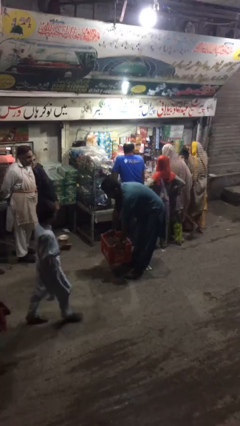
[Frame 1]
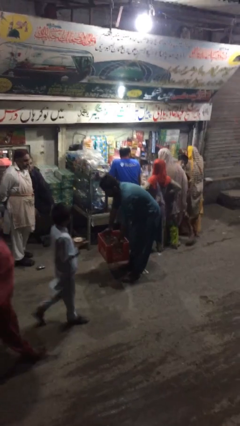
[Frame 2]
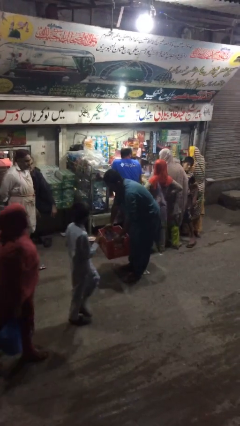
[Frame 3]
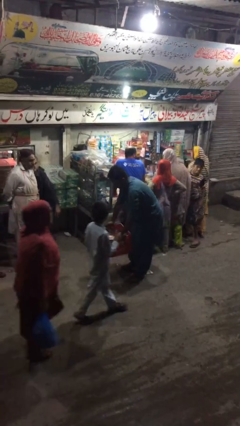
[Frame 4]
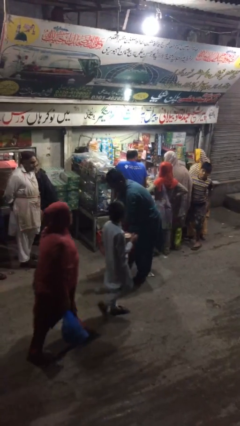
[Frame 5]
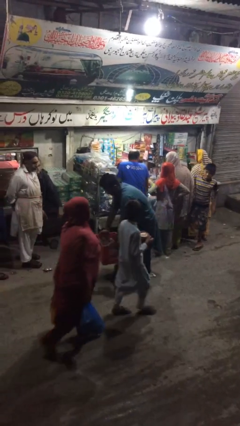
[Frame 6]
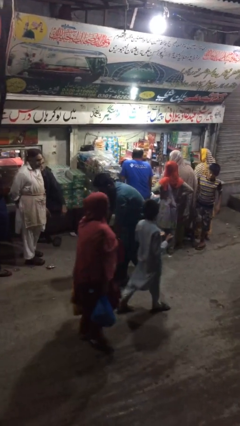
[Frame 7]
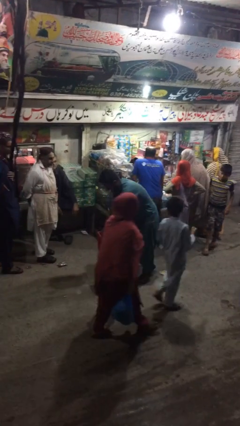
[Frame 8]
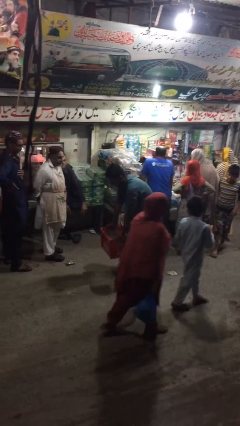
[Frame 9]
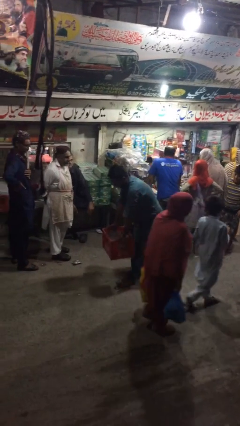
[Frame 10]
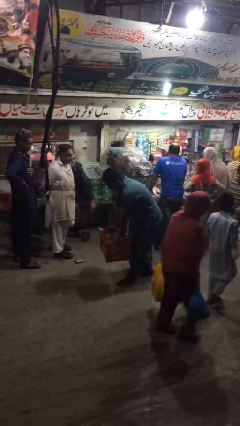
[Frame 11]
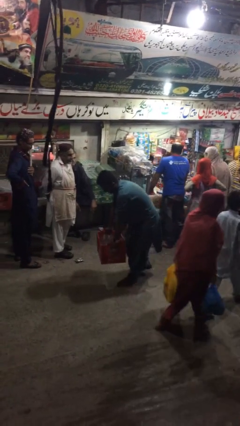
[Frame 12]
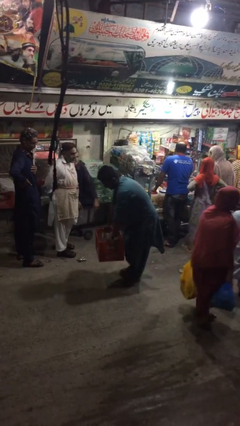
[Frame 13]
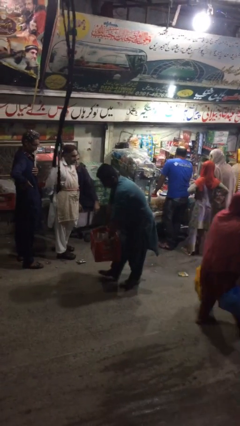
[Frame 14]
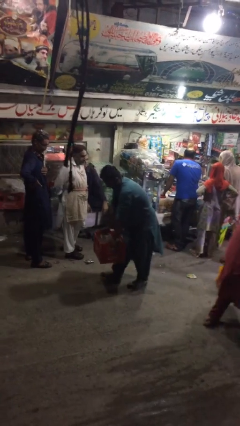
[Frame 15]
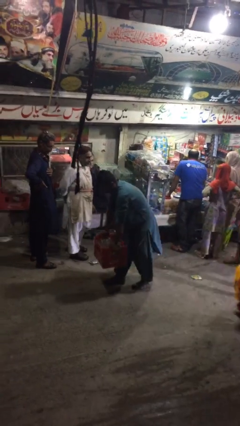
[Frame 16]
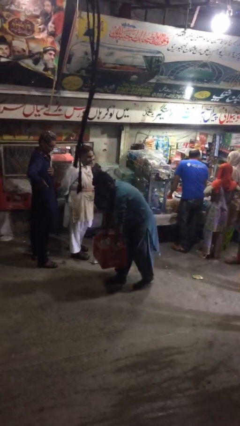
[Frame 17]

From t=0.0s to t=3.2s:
person carries heavy object

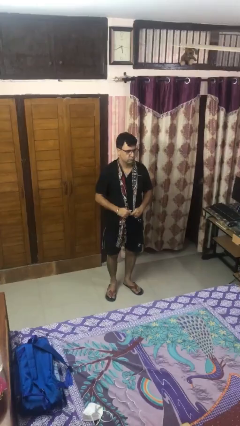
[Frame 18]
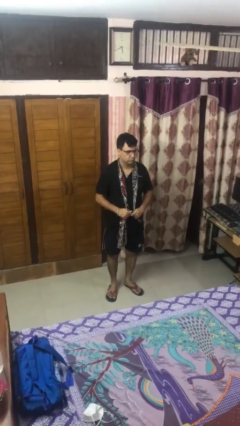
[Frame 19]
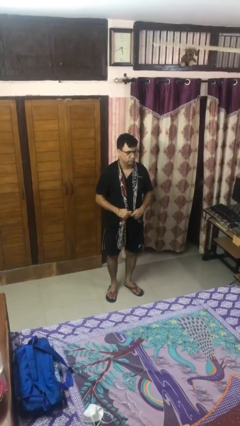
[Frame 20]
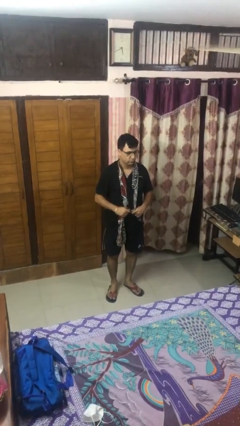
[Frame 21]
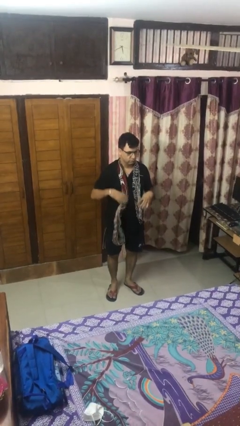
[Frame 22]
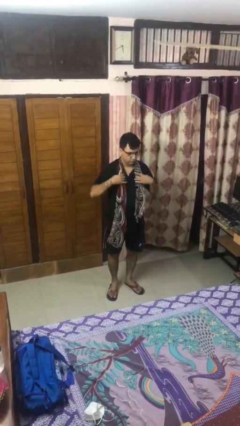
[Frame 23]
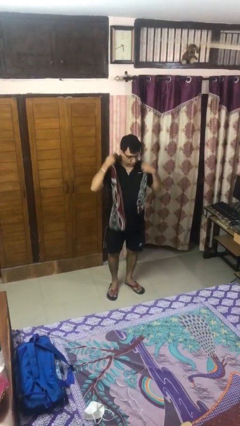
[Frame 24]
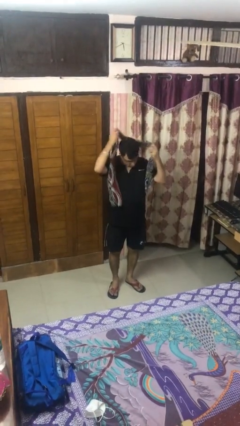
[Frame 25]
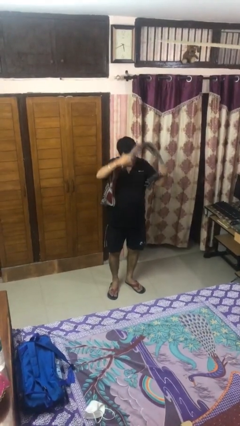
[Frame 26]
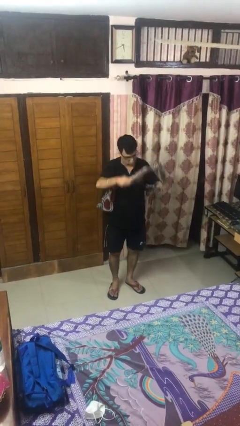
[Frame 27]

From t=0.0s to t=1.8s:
person takes off scarf

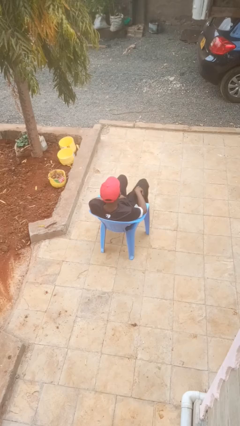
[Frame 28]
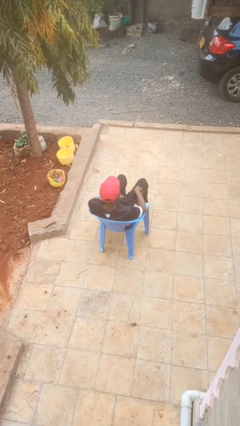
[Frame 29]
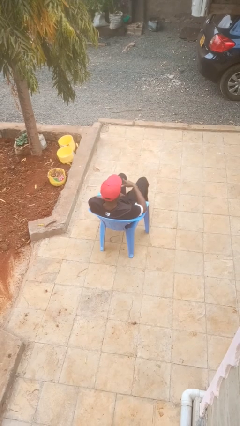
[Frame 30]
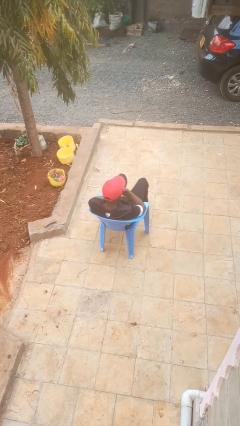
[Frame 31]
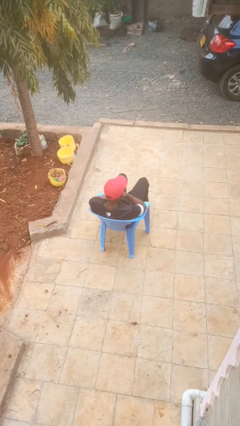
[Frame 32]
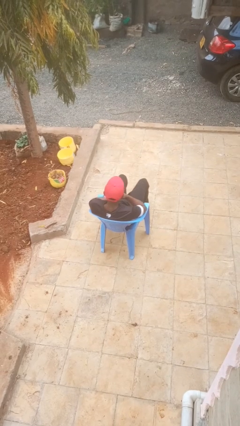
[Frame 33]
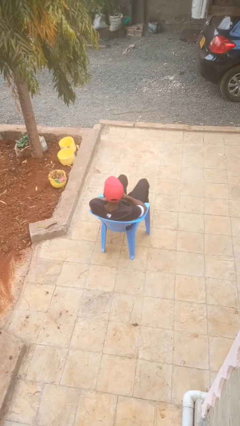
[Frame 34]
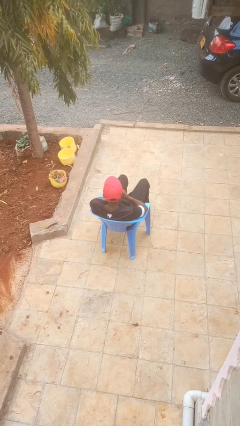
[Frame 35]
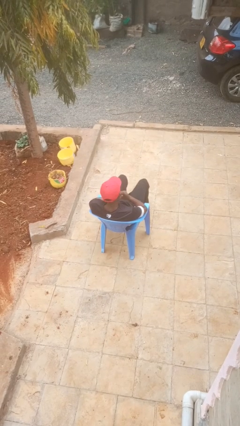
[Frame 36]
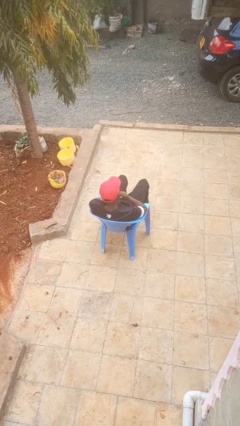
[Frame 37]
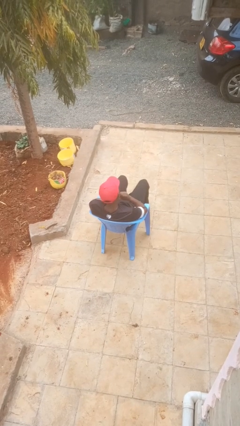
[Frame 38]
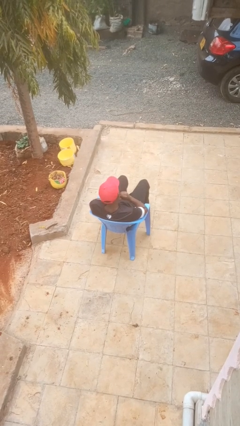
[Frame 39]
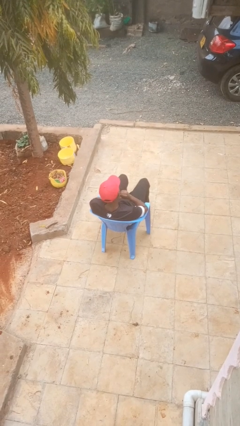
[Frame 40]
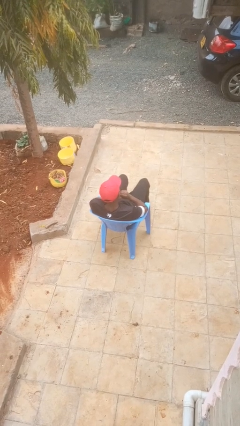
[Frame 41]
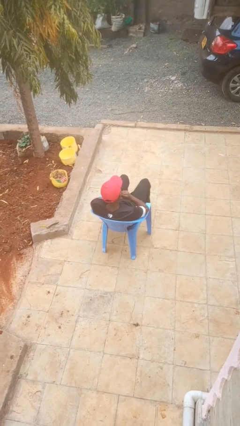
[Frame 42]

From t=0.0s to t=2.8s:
person strokes chin

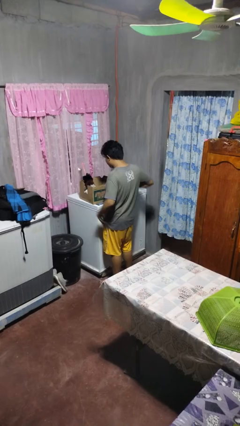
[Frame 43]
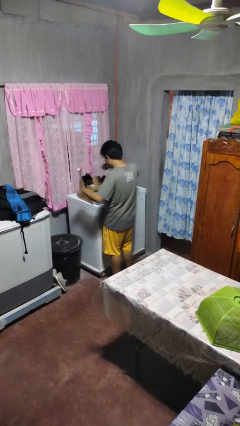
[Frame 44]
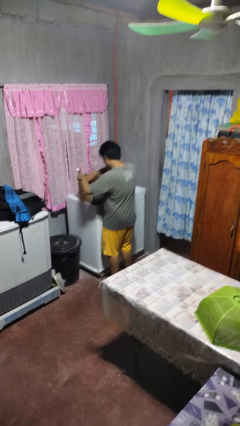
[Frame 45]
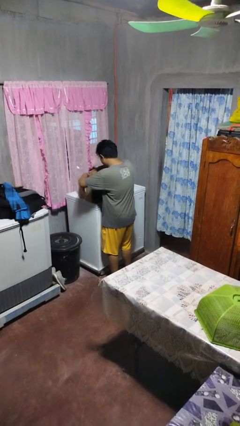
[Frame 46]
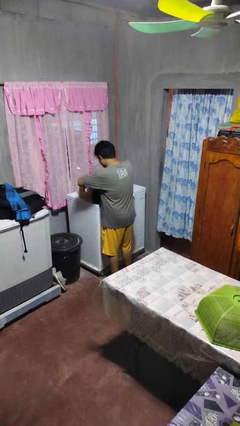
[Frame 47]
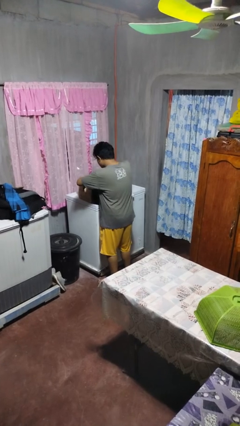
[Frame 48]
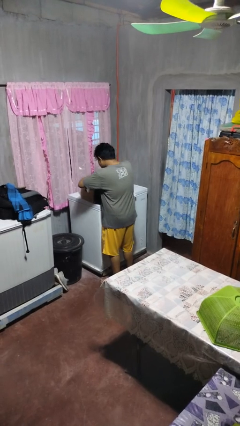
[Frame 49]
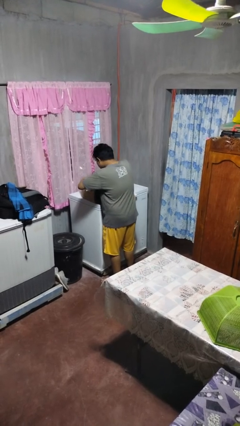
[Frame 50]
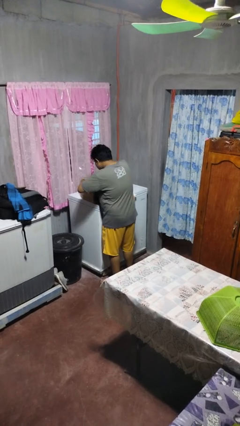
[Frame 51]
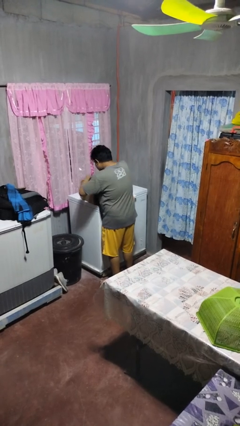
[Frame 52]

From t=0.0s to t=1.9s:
person searches in box

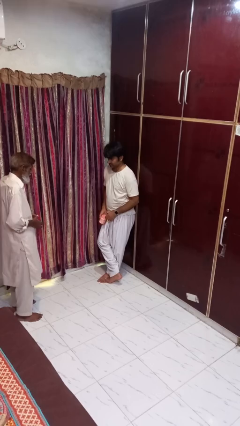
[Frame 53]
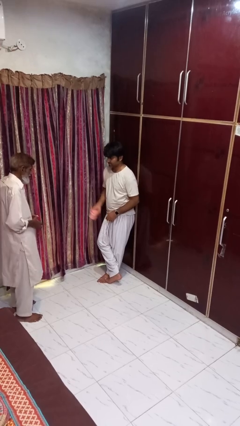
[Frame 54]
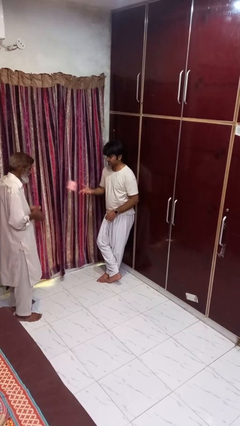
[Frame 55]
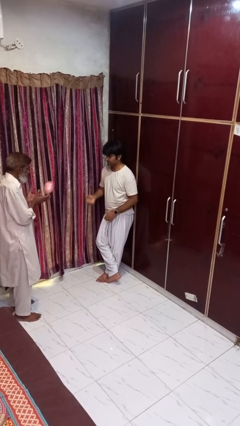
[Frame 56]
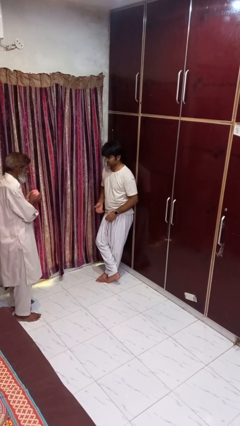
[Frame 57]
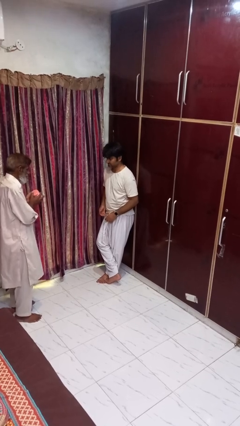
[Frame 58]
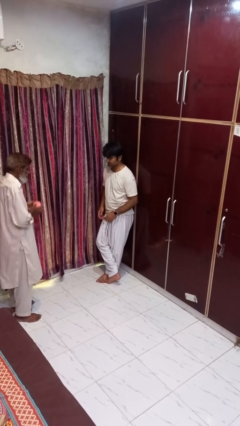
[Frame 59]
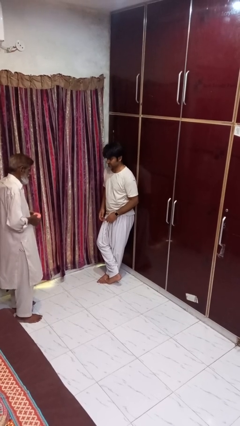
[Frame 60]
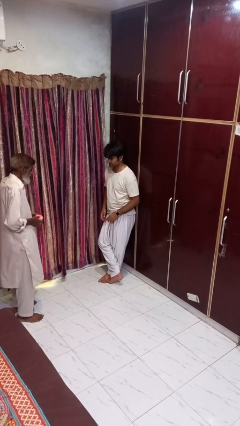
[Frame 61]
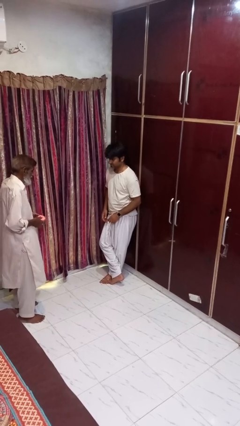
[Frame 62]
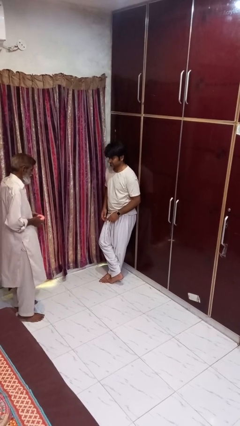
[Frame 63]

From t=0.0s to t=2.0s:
person throws object to person

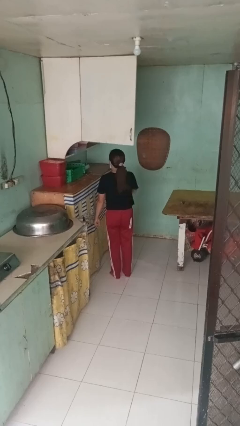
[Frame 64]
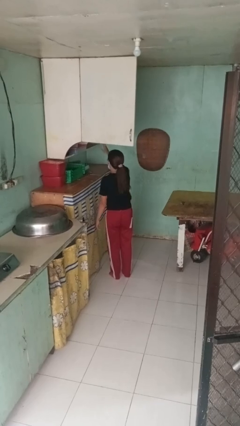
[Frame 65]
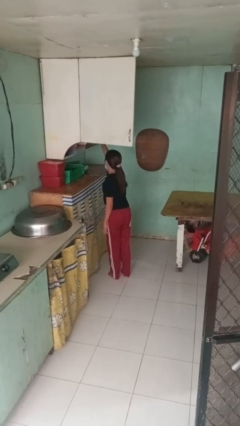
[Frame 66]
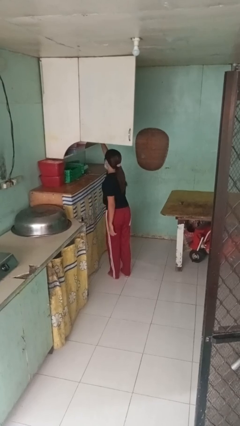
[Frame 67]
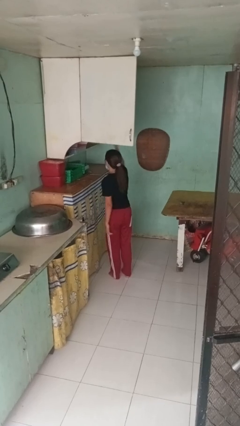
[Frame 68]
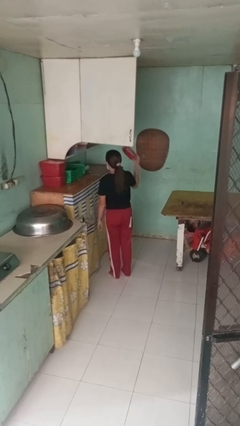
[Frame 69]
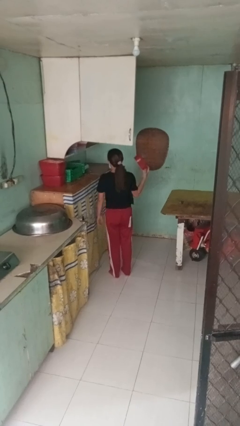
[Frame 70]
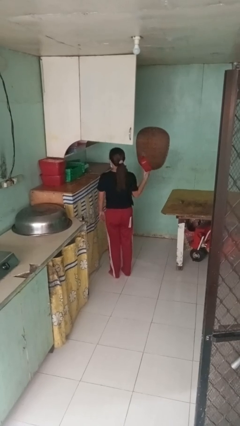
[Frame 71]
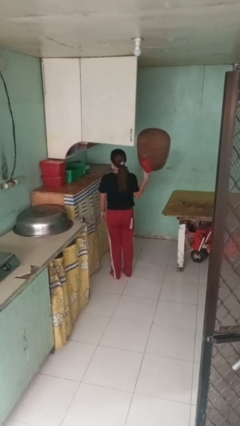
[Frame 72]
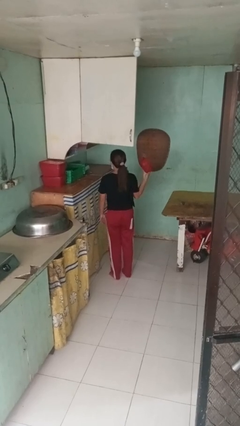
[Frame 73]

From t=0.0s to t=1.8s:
person takes object from cabinet

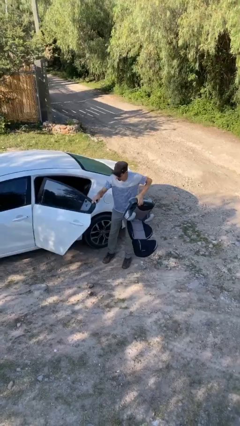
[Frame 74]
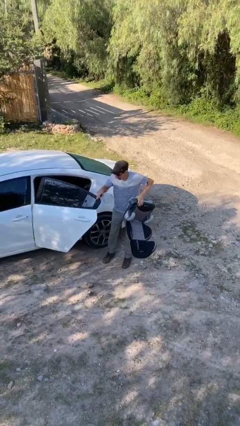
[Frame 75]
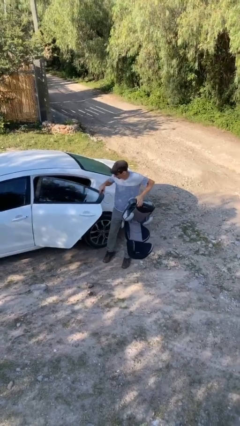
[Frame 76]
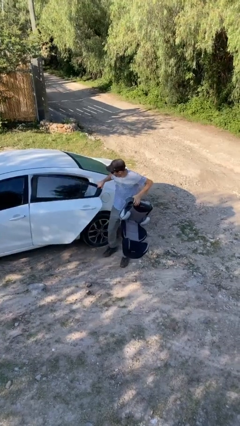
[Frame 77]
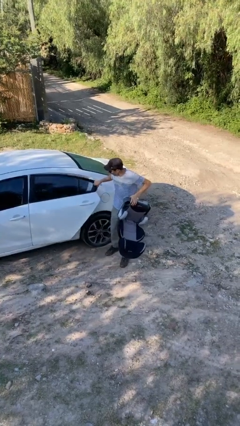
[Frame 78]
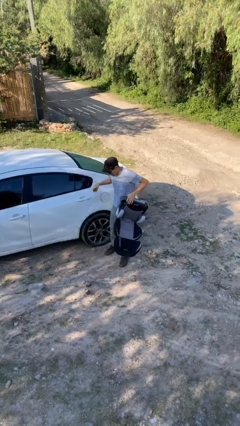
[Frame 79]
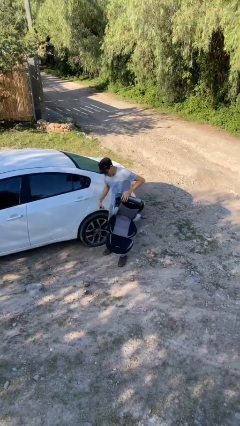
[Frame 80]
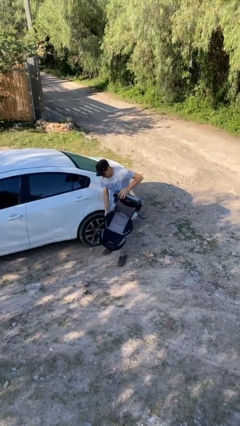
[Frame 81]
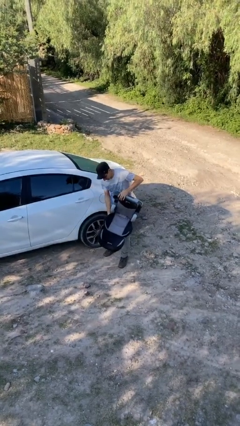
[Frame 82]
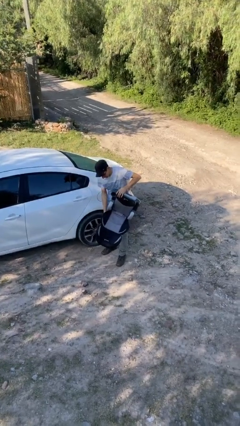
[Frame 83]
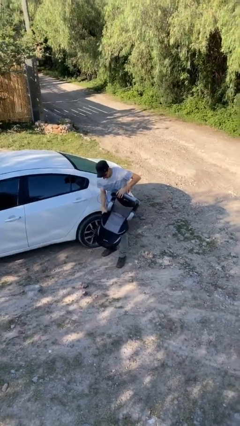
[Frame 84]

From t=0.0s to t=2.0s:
person closes car door

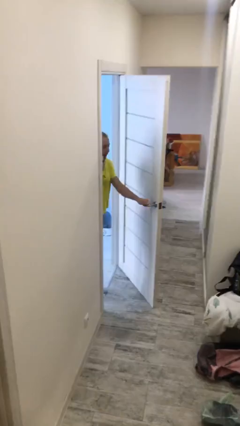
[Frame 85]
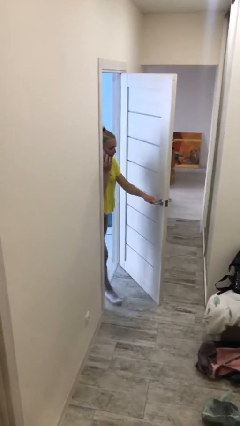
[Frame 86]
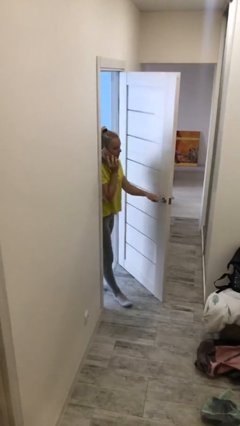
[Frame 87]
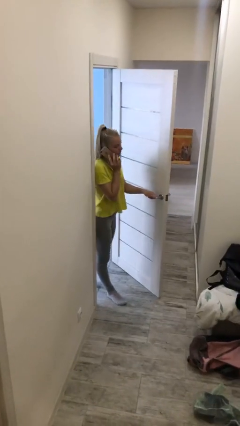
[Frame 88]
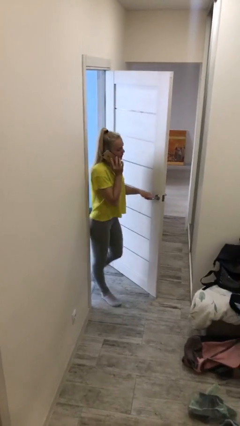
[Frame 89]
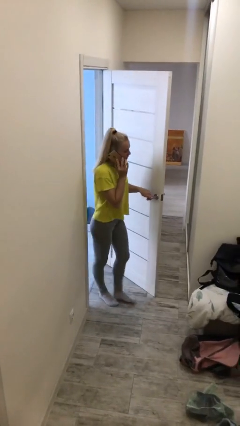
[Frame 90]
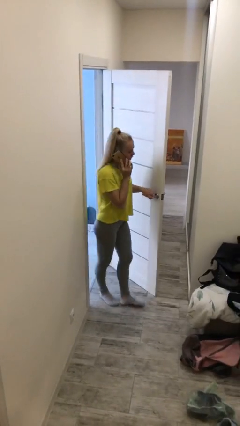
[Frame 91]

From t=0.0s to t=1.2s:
person enters scene through structure

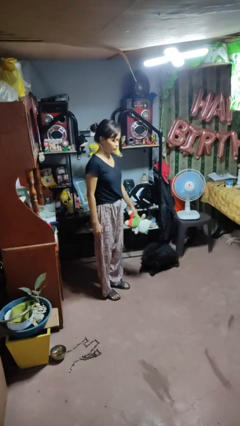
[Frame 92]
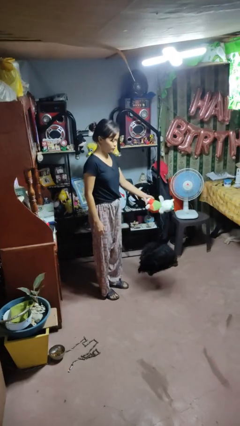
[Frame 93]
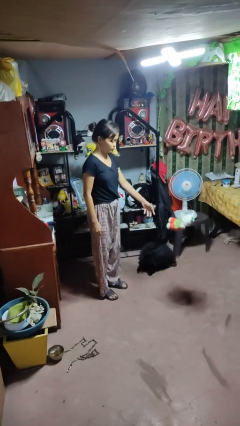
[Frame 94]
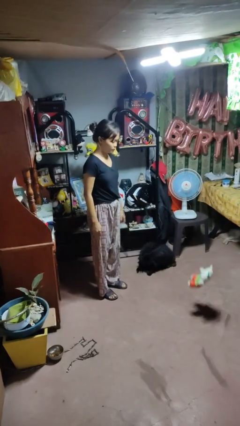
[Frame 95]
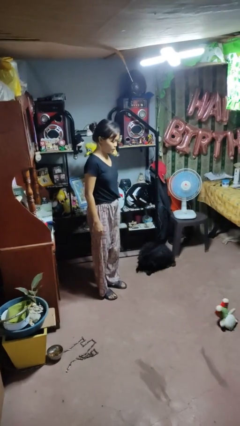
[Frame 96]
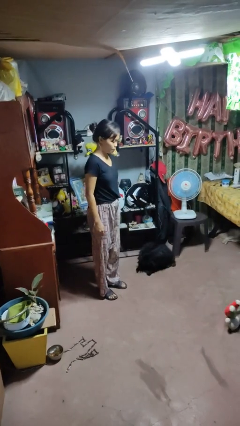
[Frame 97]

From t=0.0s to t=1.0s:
person throws object to ground
